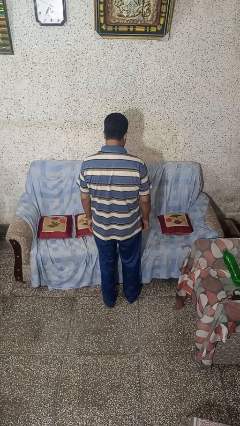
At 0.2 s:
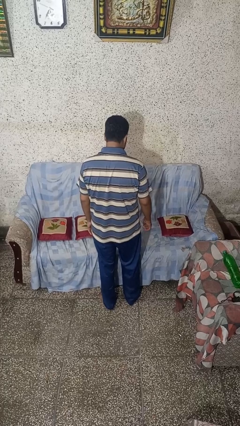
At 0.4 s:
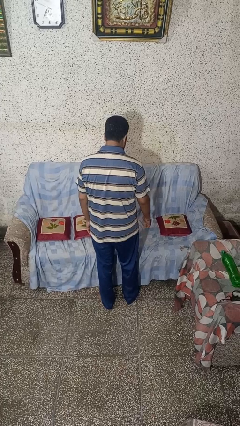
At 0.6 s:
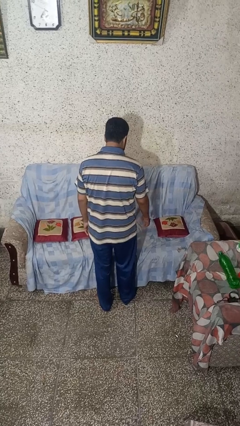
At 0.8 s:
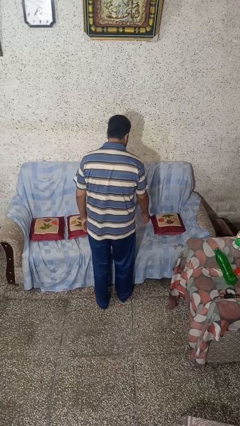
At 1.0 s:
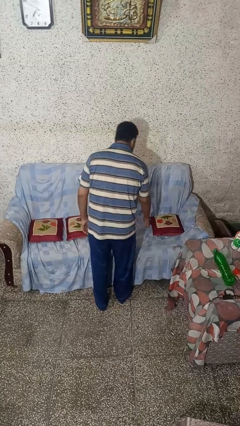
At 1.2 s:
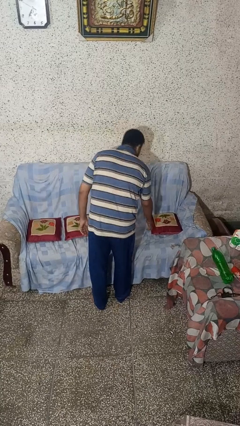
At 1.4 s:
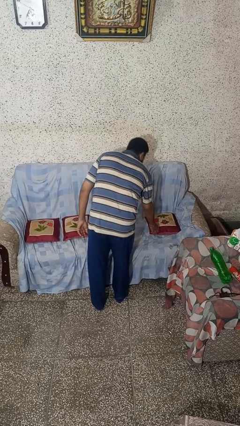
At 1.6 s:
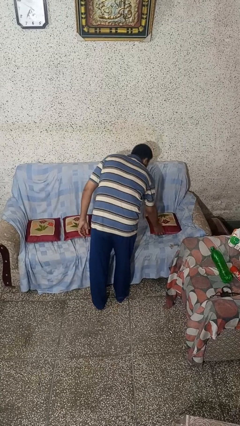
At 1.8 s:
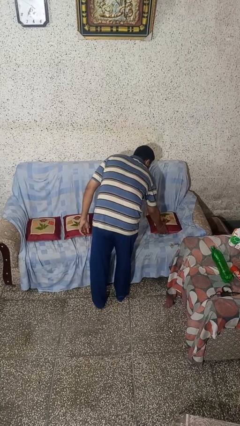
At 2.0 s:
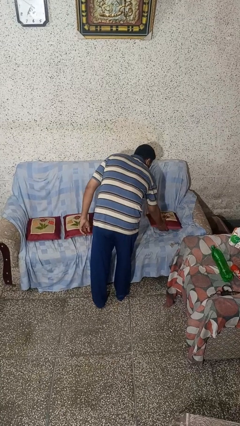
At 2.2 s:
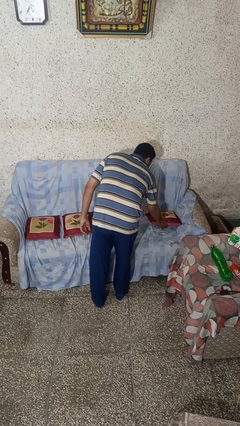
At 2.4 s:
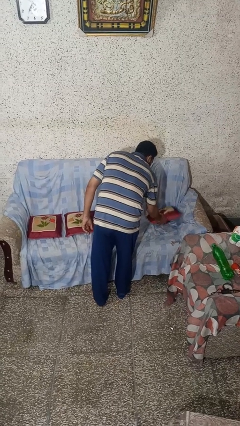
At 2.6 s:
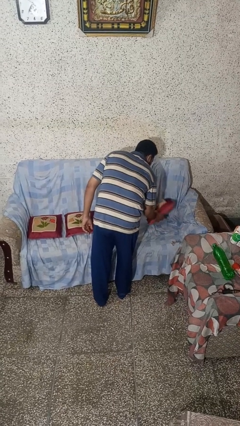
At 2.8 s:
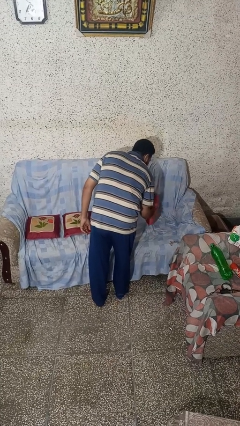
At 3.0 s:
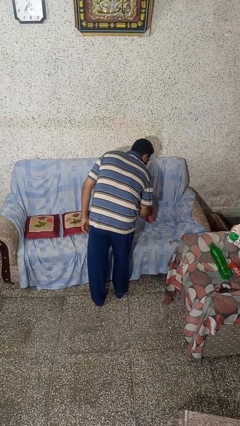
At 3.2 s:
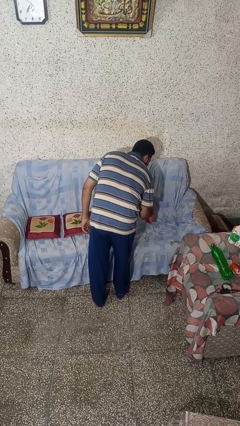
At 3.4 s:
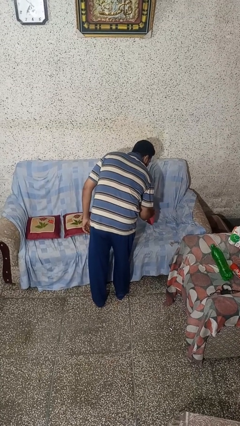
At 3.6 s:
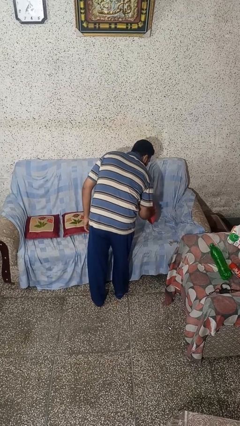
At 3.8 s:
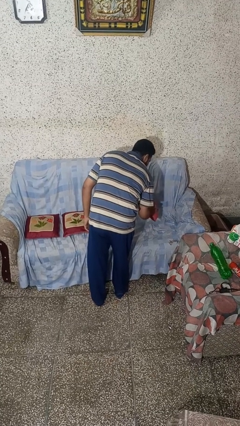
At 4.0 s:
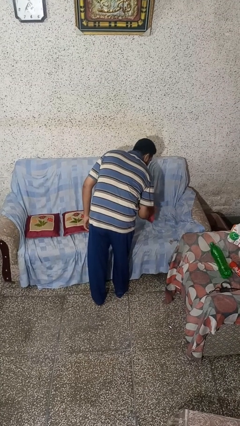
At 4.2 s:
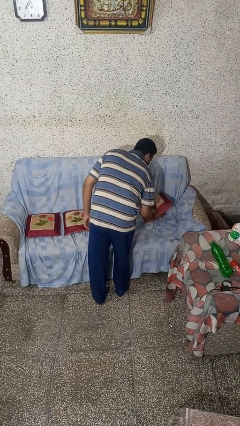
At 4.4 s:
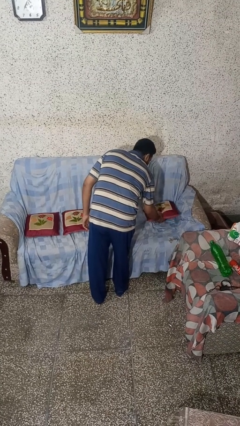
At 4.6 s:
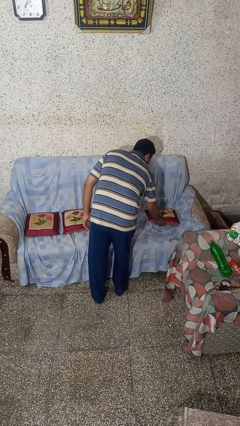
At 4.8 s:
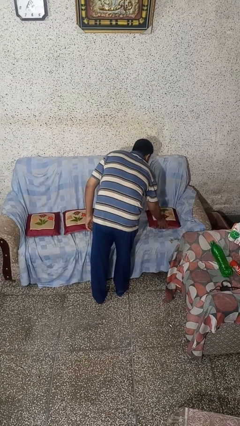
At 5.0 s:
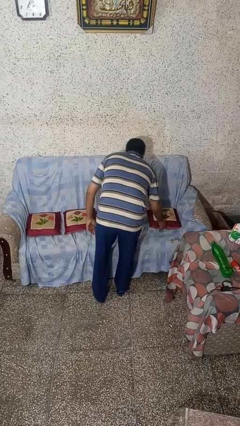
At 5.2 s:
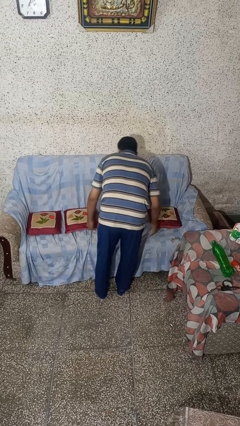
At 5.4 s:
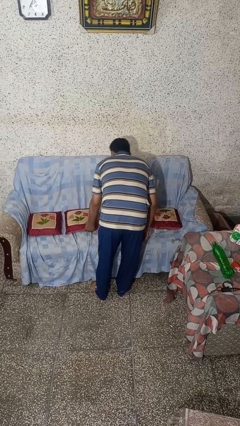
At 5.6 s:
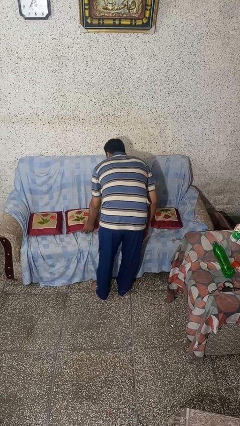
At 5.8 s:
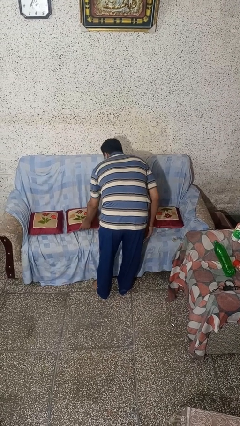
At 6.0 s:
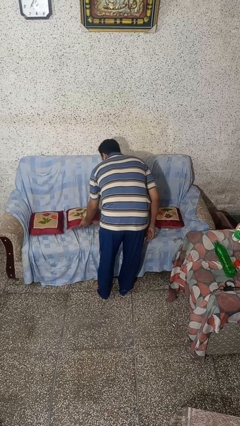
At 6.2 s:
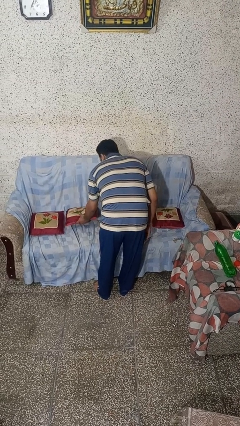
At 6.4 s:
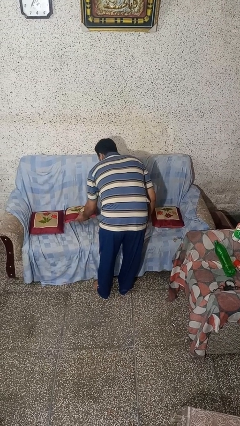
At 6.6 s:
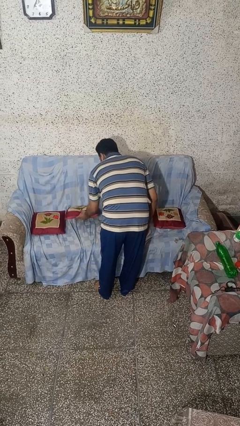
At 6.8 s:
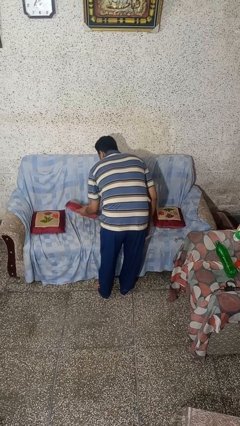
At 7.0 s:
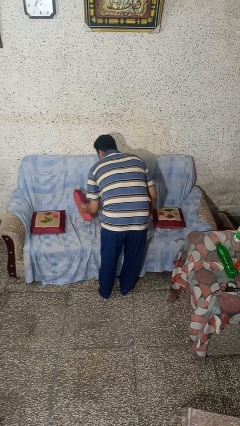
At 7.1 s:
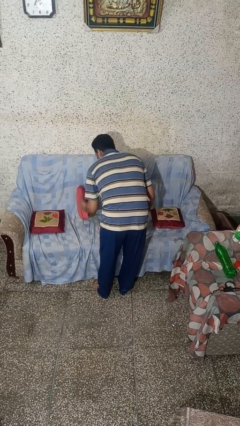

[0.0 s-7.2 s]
person searches in couch

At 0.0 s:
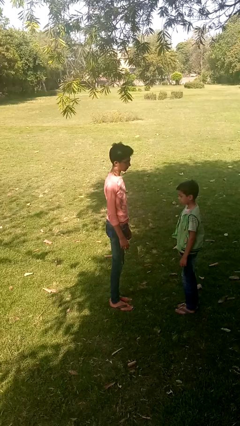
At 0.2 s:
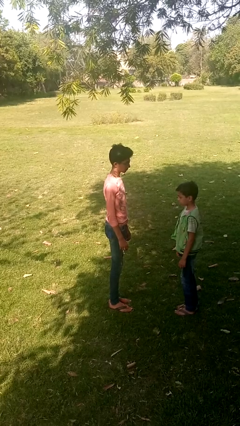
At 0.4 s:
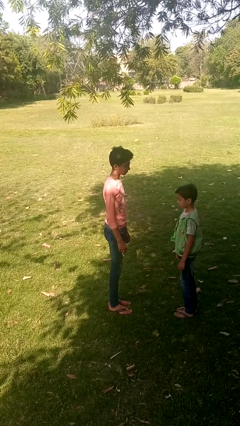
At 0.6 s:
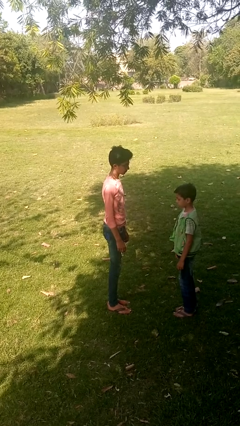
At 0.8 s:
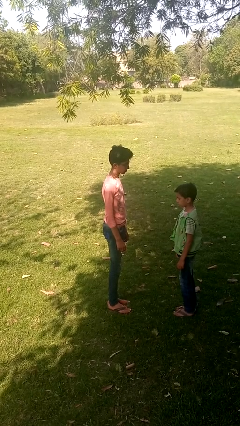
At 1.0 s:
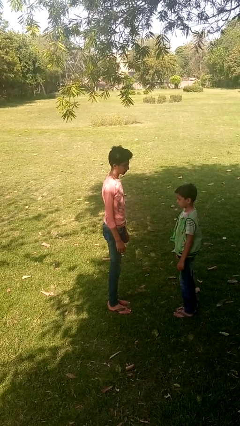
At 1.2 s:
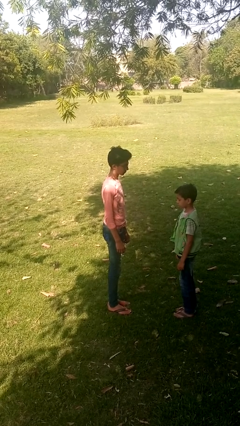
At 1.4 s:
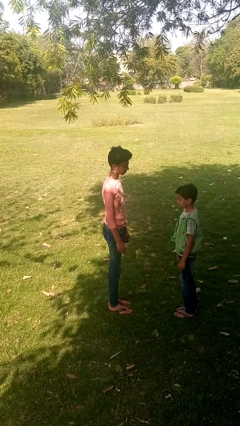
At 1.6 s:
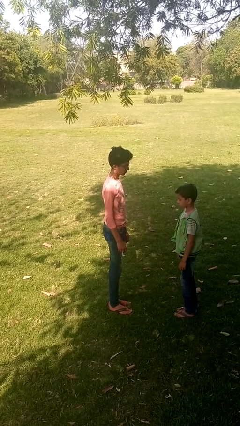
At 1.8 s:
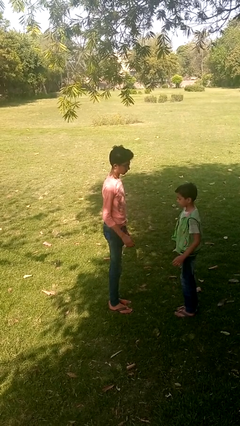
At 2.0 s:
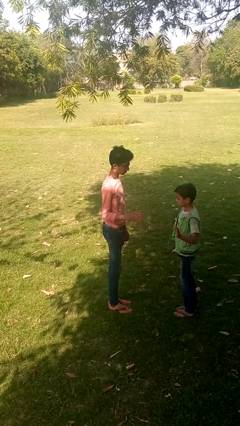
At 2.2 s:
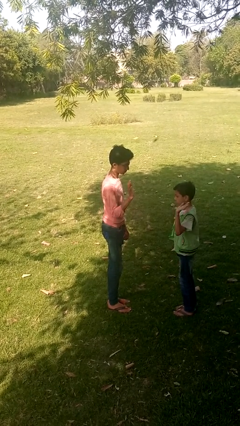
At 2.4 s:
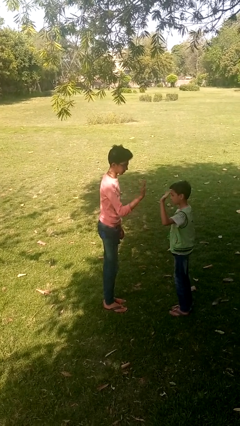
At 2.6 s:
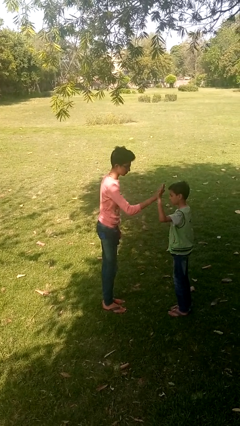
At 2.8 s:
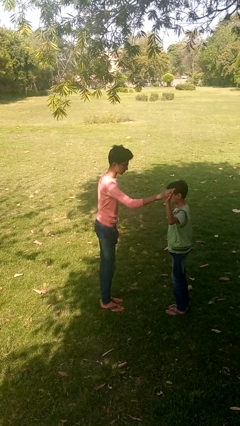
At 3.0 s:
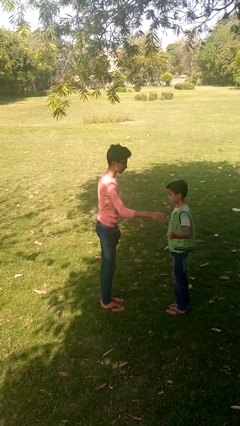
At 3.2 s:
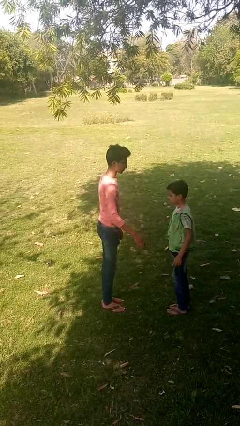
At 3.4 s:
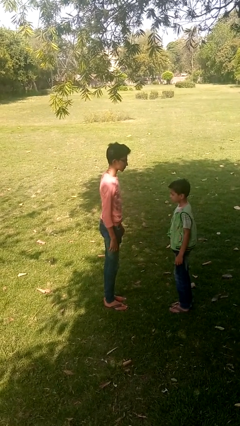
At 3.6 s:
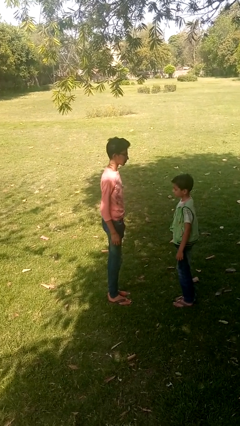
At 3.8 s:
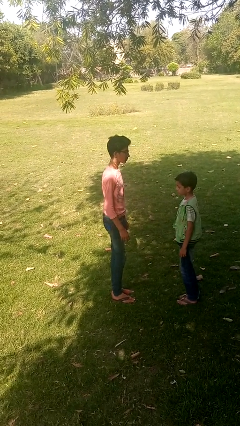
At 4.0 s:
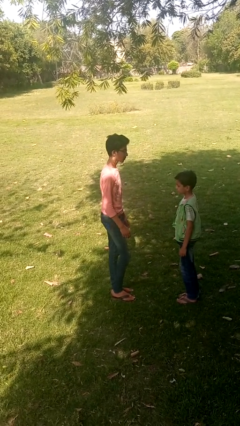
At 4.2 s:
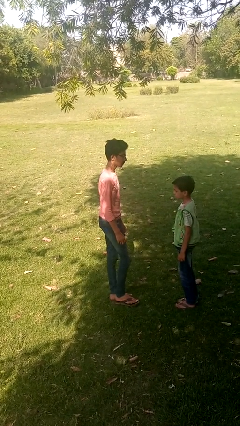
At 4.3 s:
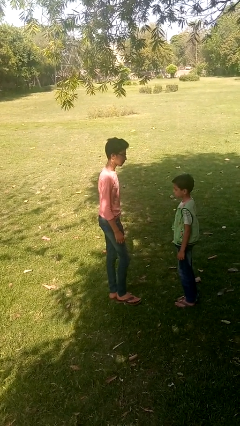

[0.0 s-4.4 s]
person highfives hand

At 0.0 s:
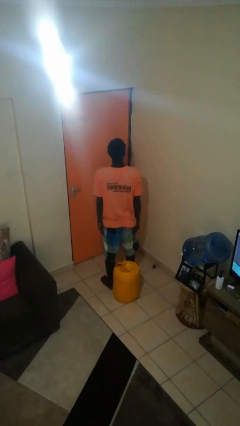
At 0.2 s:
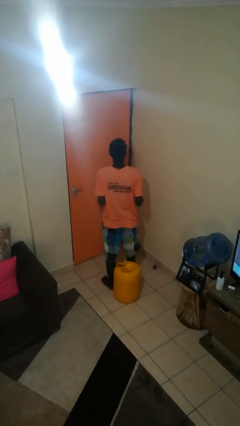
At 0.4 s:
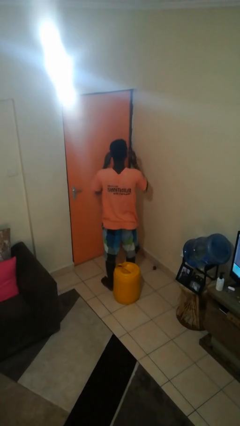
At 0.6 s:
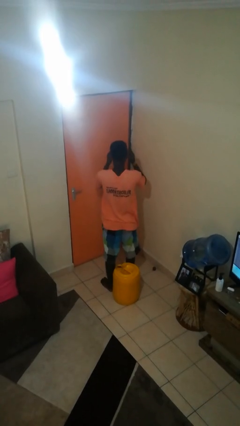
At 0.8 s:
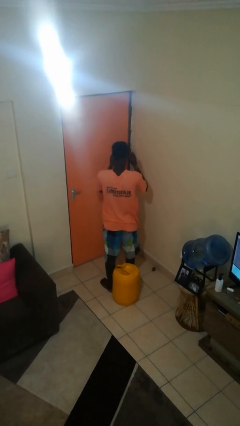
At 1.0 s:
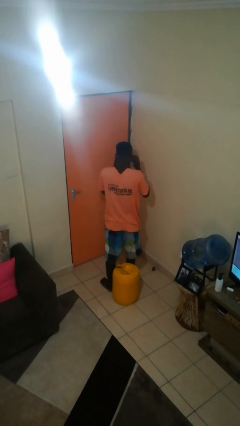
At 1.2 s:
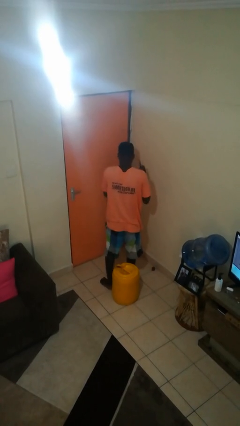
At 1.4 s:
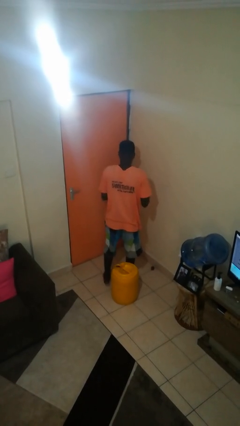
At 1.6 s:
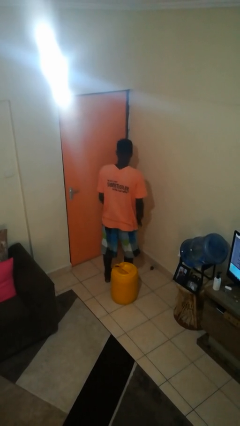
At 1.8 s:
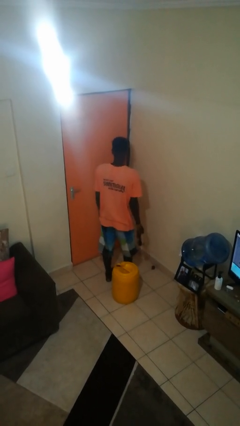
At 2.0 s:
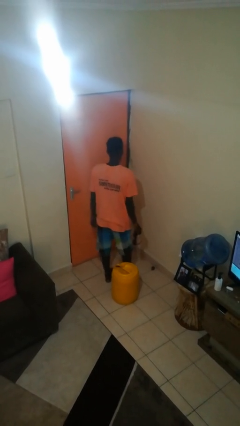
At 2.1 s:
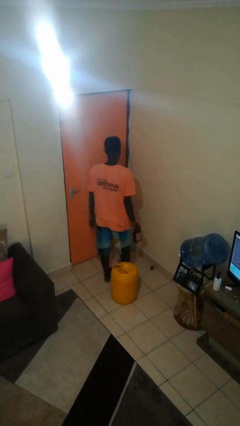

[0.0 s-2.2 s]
person takes off sunglasses

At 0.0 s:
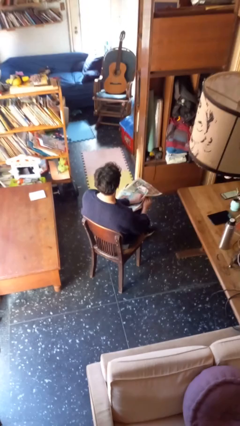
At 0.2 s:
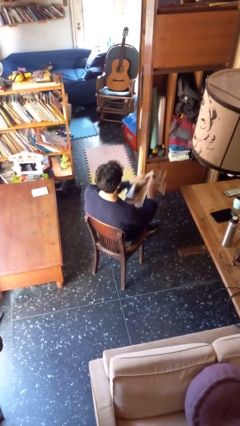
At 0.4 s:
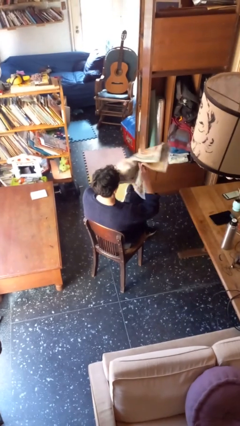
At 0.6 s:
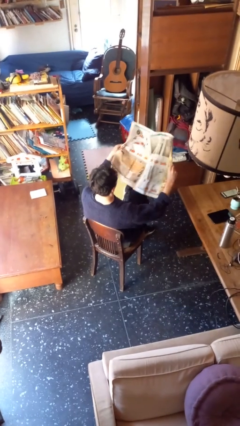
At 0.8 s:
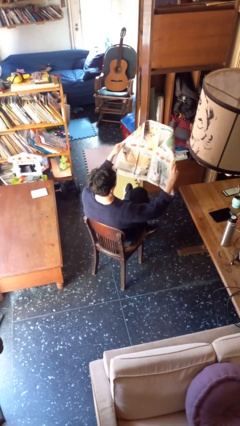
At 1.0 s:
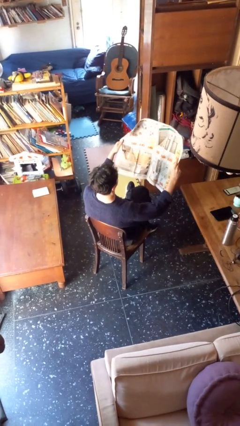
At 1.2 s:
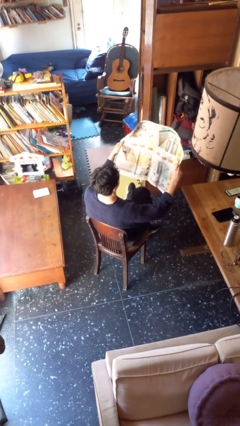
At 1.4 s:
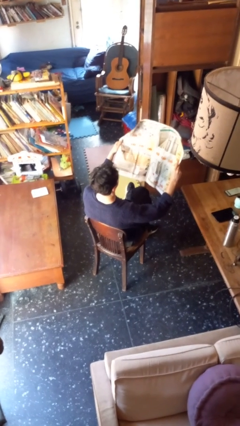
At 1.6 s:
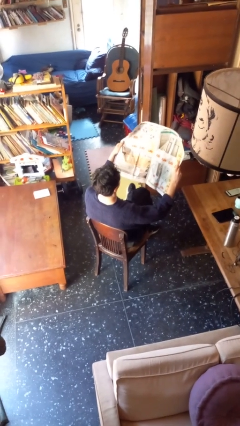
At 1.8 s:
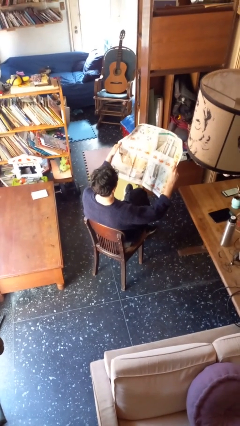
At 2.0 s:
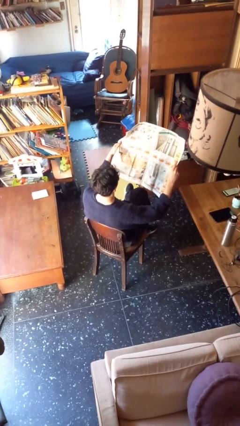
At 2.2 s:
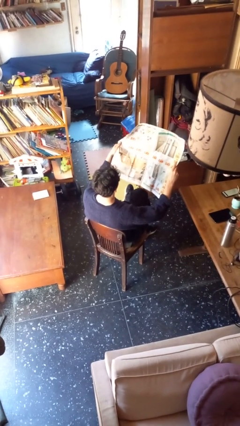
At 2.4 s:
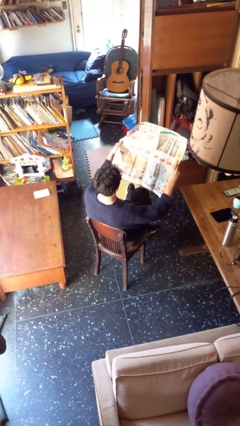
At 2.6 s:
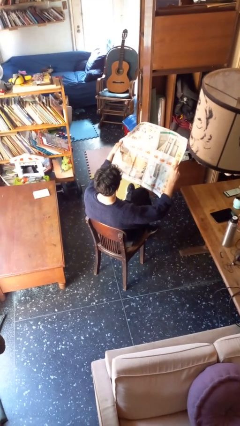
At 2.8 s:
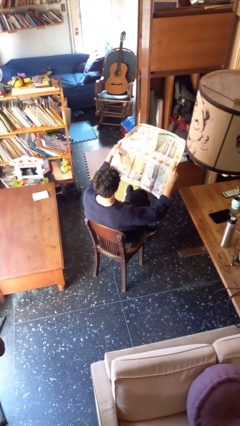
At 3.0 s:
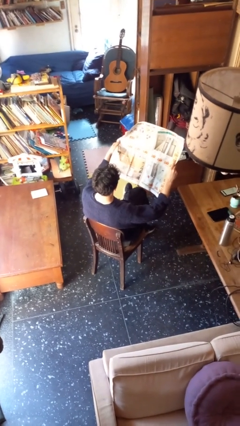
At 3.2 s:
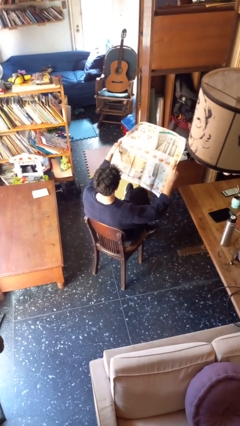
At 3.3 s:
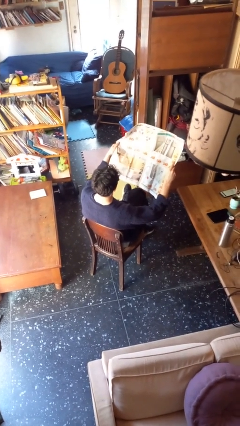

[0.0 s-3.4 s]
person reads newspaper

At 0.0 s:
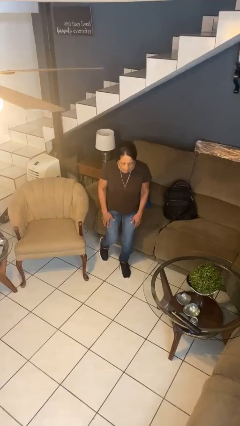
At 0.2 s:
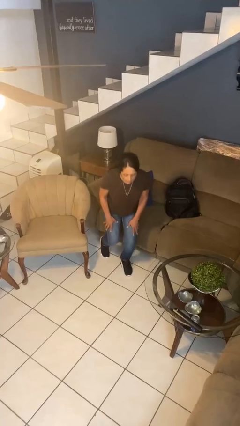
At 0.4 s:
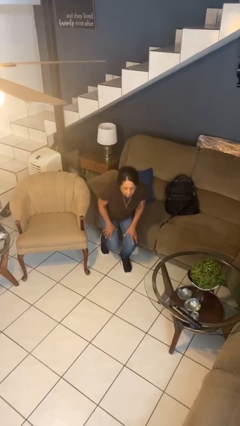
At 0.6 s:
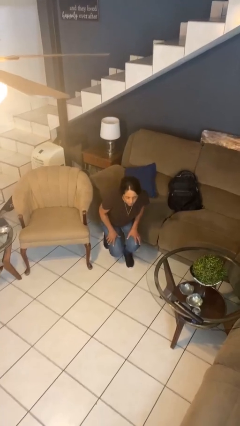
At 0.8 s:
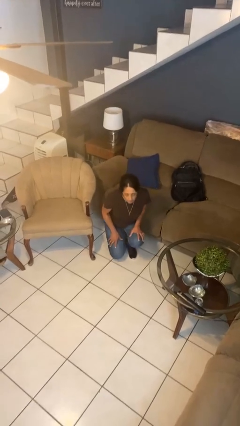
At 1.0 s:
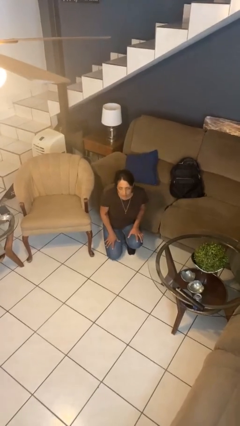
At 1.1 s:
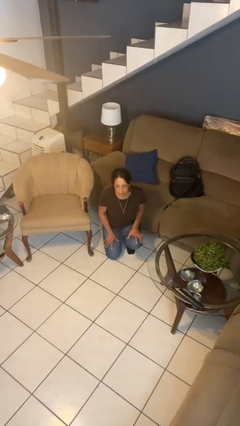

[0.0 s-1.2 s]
person kneels
